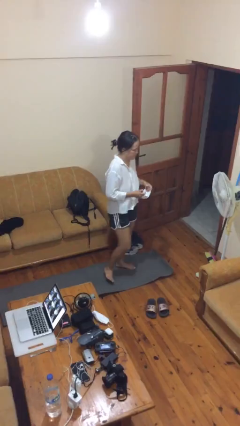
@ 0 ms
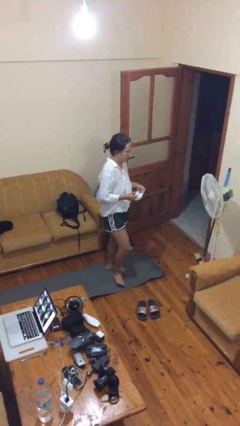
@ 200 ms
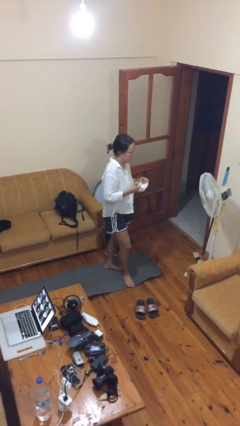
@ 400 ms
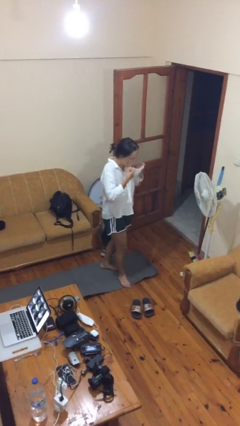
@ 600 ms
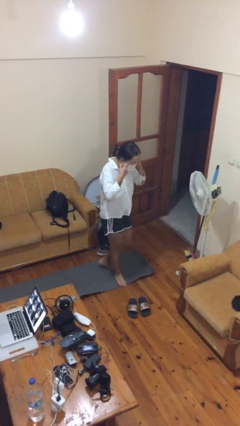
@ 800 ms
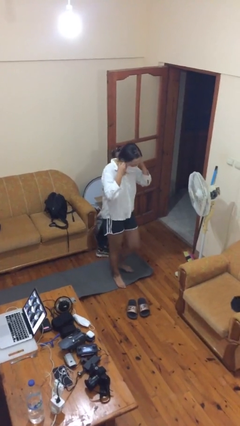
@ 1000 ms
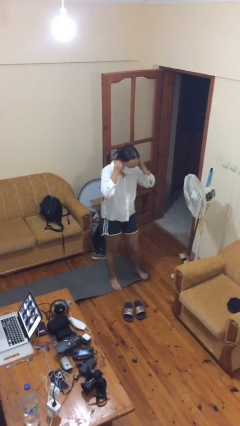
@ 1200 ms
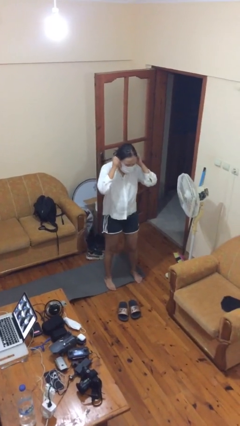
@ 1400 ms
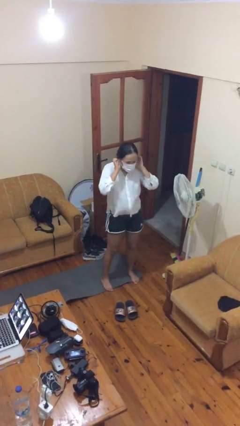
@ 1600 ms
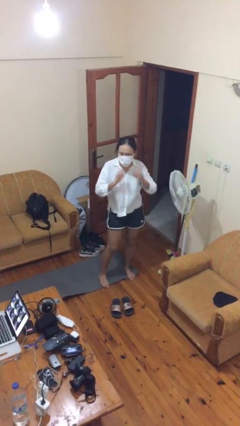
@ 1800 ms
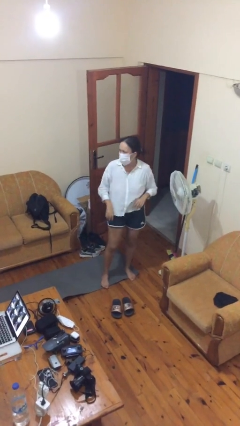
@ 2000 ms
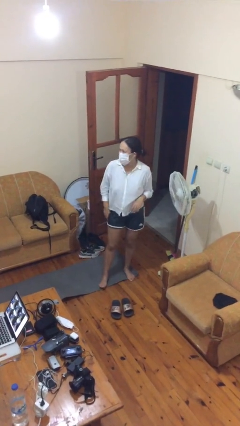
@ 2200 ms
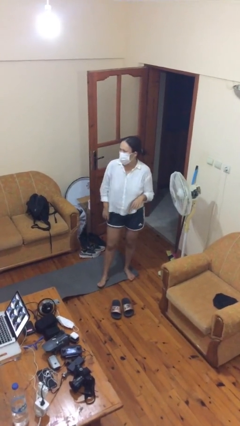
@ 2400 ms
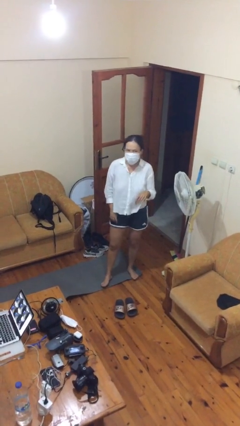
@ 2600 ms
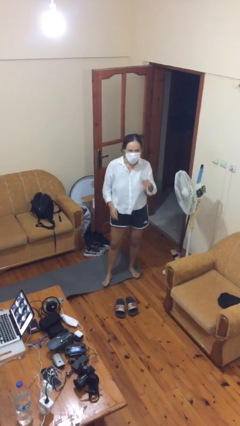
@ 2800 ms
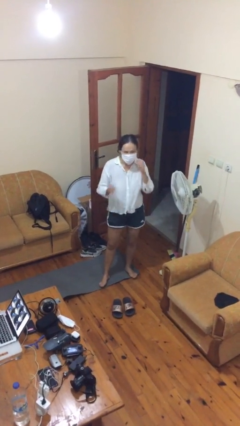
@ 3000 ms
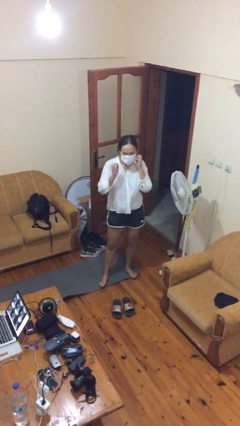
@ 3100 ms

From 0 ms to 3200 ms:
person puts on facemask

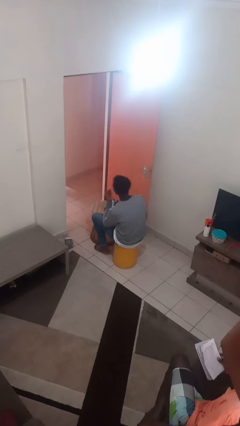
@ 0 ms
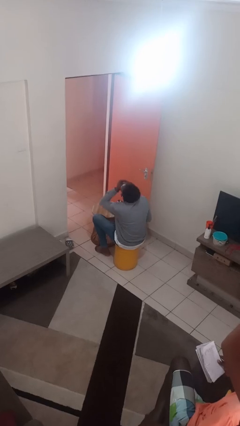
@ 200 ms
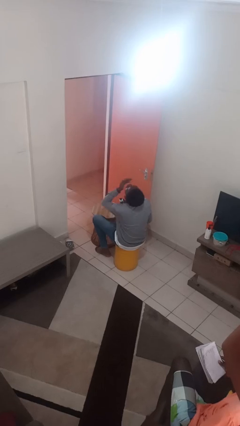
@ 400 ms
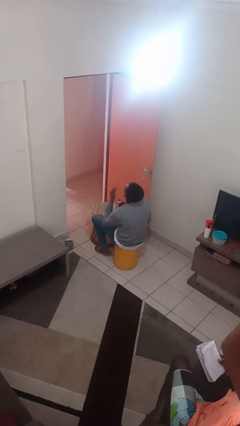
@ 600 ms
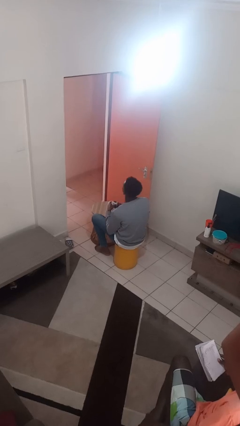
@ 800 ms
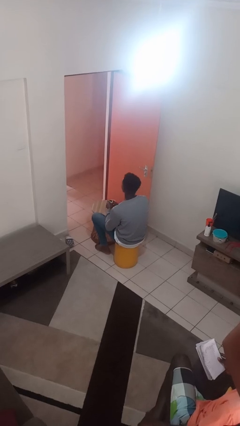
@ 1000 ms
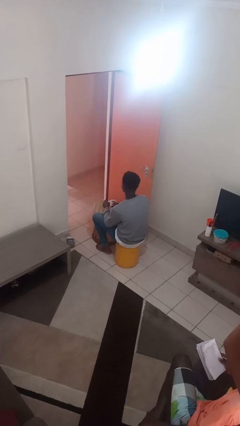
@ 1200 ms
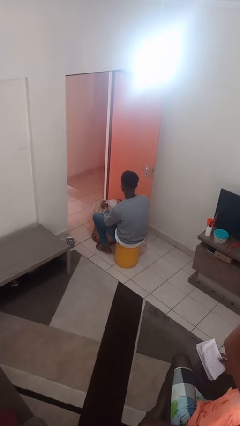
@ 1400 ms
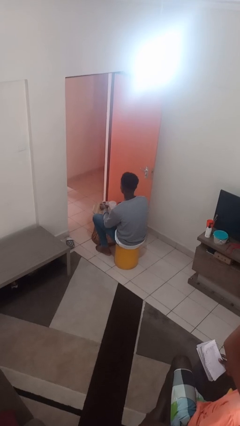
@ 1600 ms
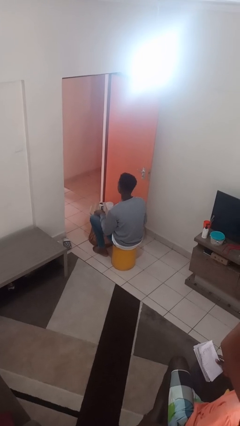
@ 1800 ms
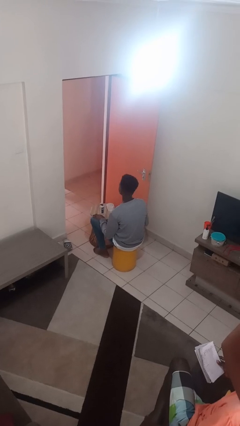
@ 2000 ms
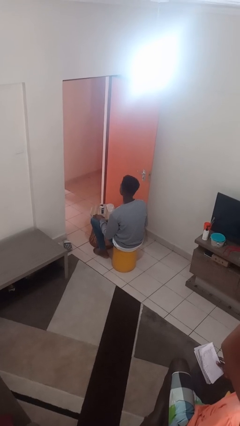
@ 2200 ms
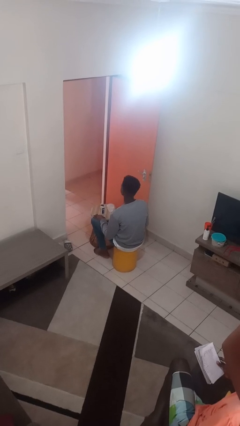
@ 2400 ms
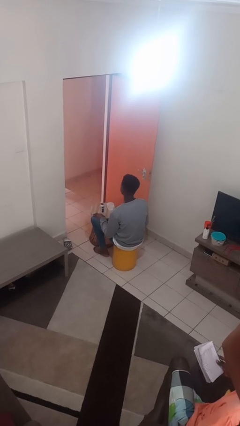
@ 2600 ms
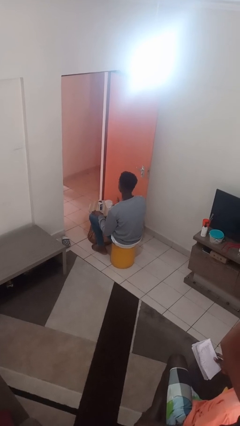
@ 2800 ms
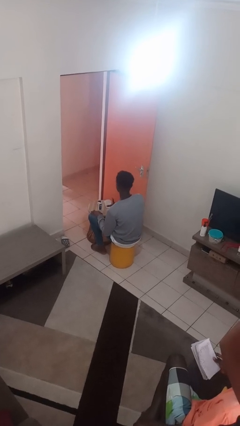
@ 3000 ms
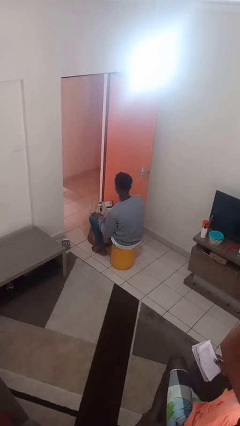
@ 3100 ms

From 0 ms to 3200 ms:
person takes medicine pills

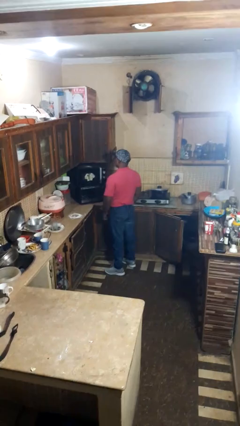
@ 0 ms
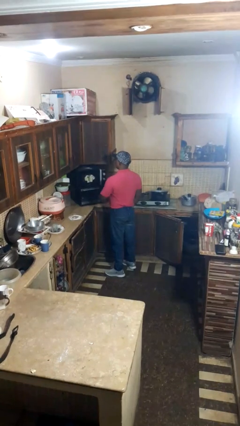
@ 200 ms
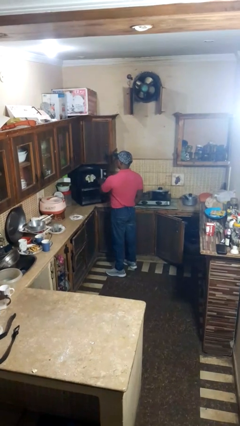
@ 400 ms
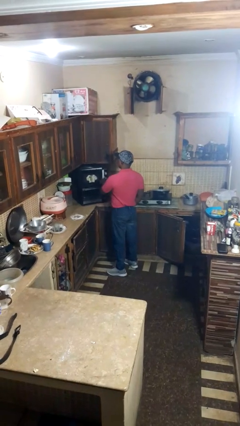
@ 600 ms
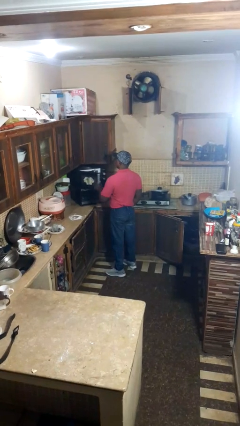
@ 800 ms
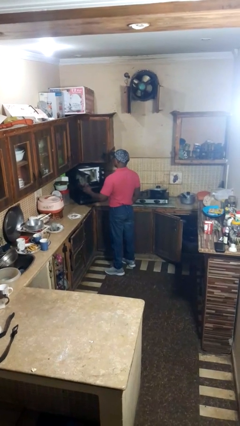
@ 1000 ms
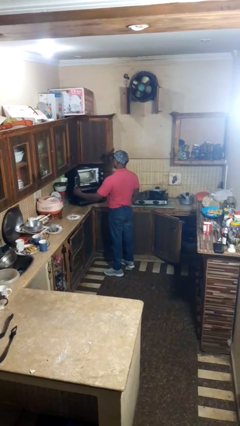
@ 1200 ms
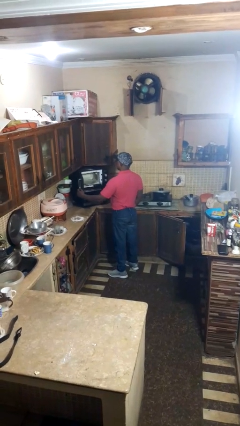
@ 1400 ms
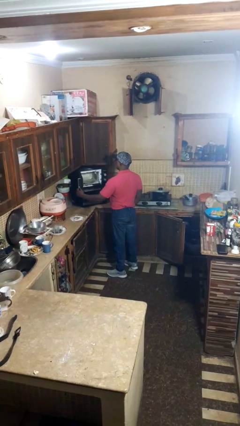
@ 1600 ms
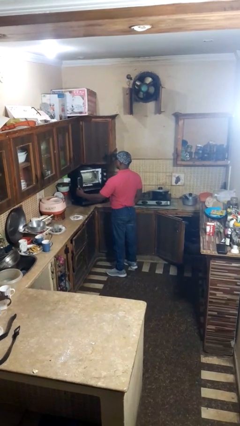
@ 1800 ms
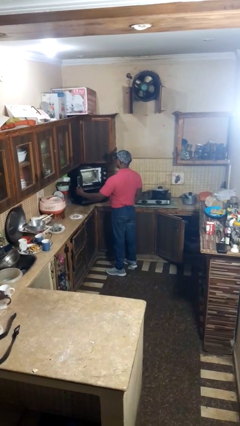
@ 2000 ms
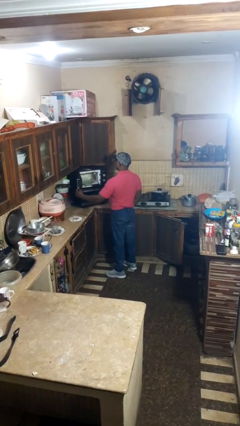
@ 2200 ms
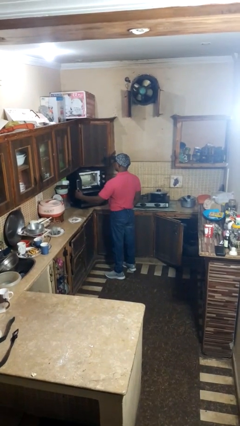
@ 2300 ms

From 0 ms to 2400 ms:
person opens microwave

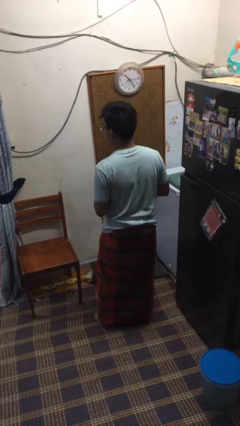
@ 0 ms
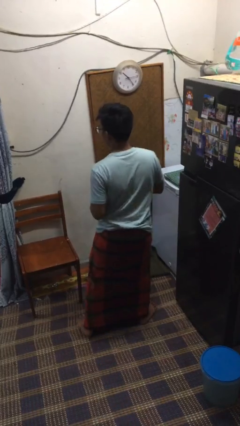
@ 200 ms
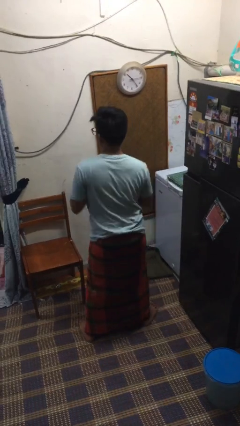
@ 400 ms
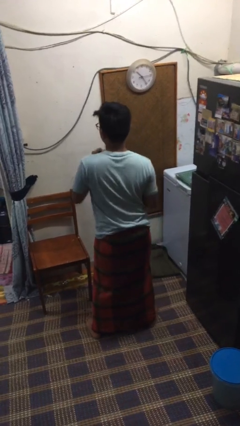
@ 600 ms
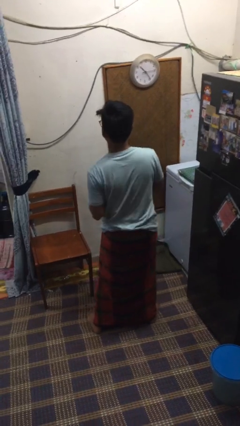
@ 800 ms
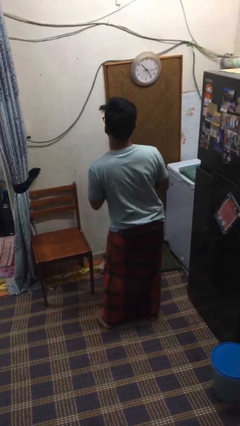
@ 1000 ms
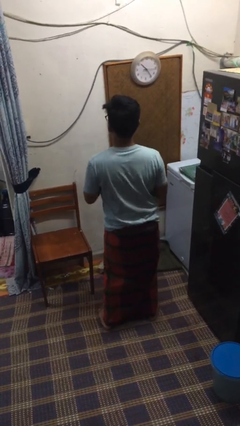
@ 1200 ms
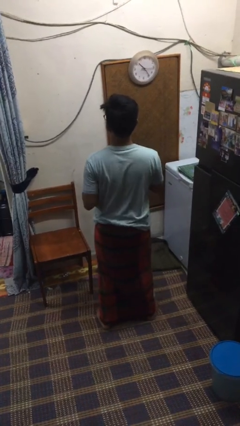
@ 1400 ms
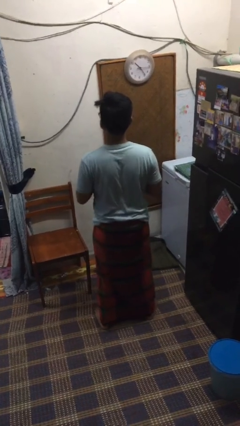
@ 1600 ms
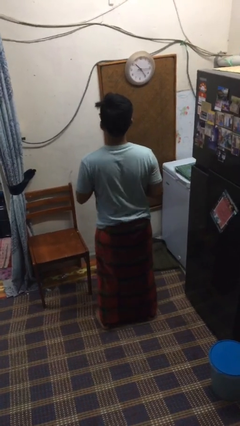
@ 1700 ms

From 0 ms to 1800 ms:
person wiggles hips

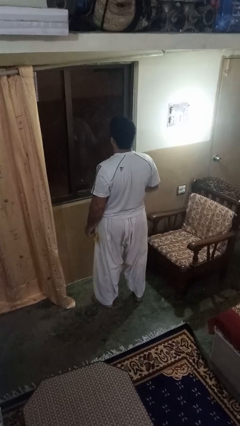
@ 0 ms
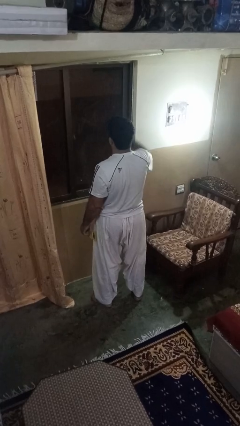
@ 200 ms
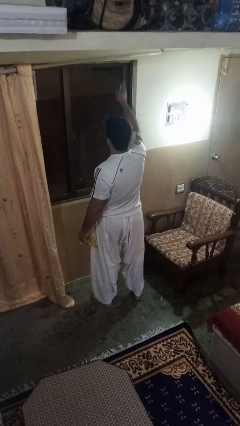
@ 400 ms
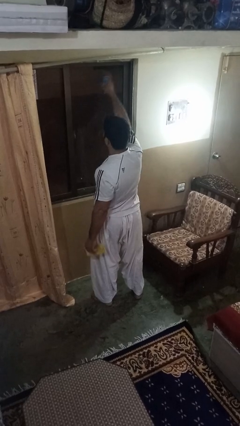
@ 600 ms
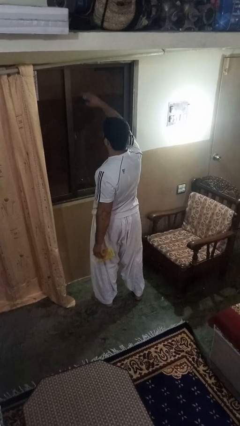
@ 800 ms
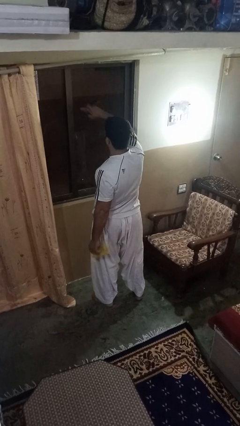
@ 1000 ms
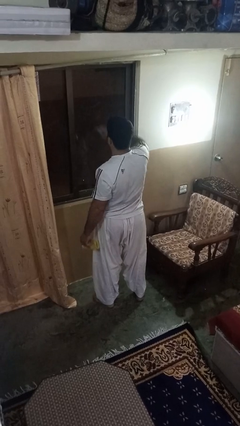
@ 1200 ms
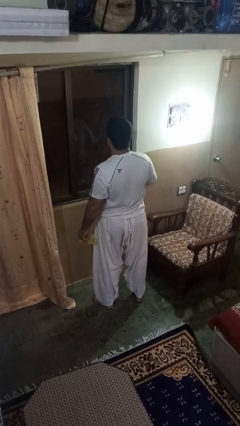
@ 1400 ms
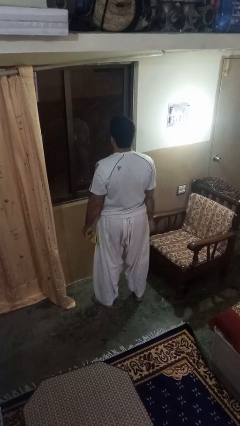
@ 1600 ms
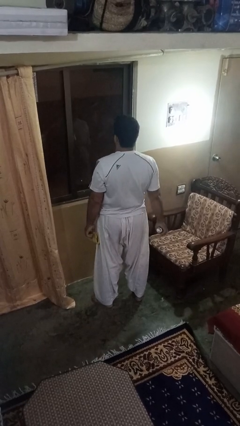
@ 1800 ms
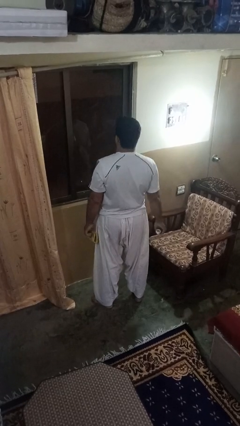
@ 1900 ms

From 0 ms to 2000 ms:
person sprays from bottle

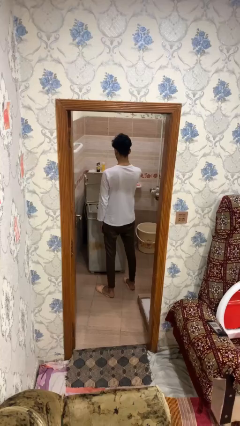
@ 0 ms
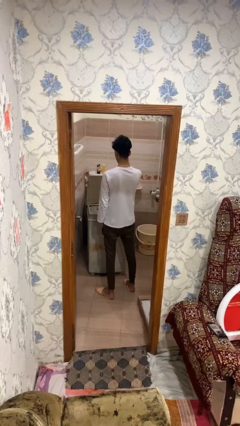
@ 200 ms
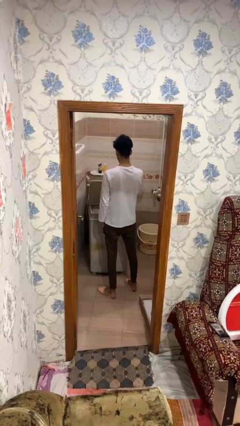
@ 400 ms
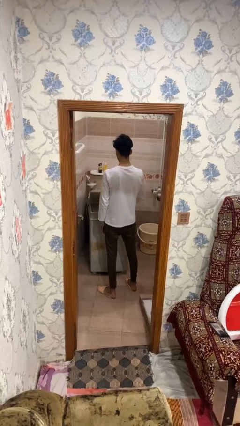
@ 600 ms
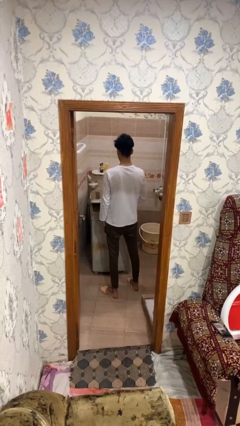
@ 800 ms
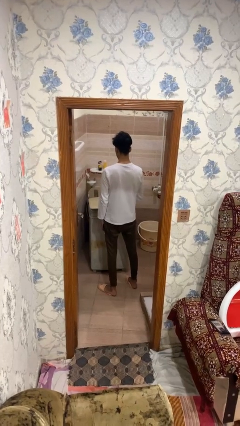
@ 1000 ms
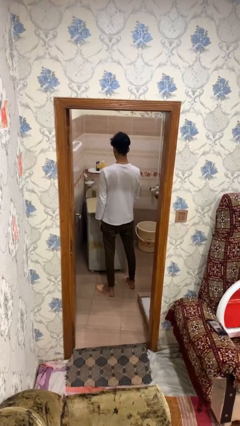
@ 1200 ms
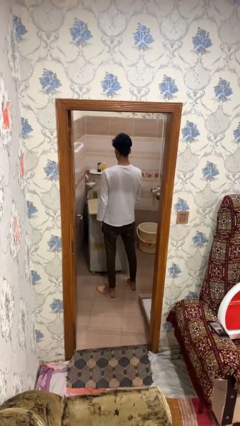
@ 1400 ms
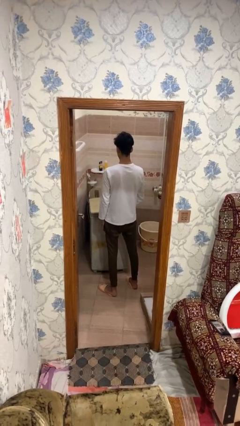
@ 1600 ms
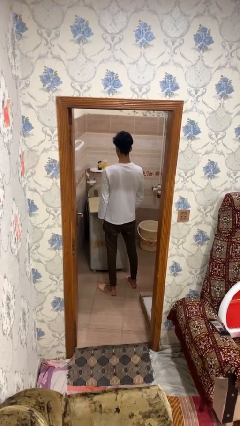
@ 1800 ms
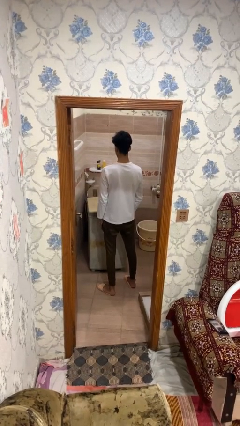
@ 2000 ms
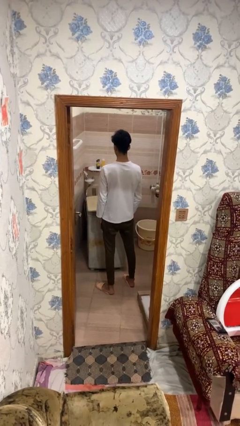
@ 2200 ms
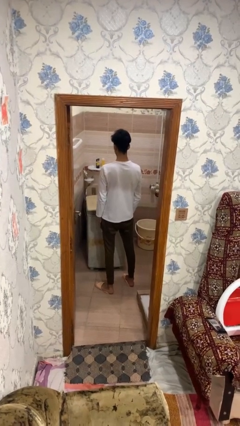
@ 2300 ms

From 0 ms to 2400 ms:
person closes clothes washer

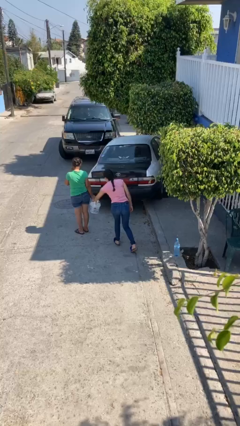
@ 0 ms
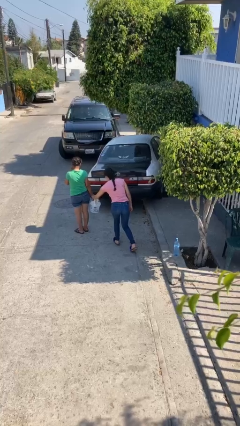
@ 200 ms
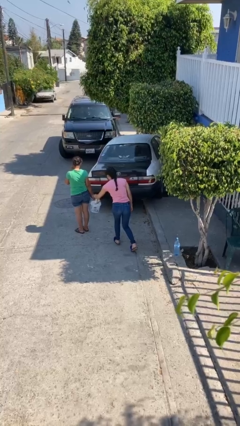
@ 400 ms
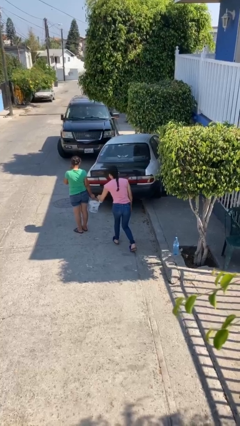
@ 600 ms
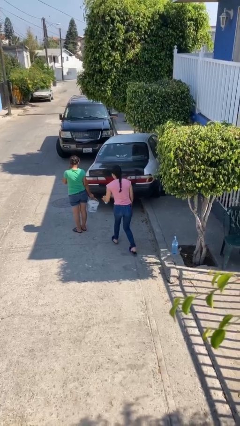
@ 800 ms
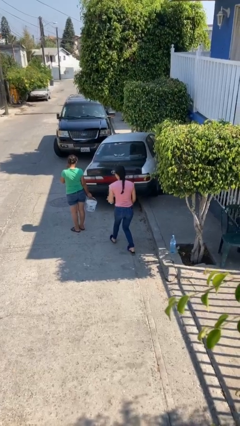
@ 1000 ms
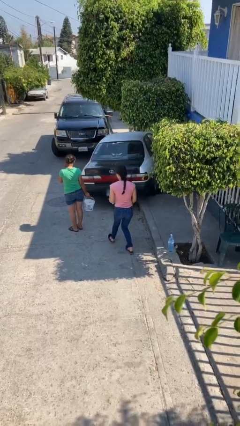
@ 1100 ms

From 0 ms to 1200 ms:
person steals object from person

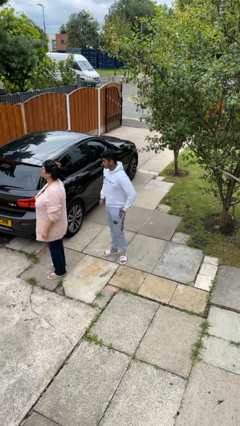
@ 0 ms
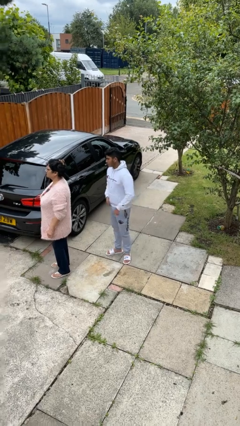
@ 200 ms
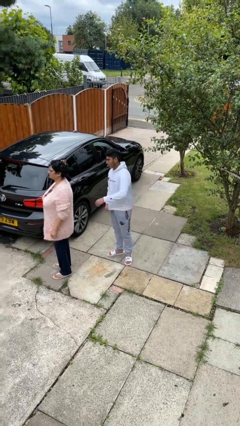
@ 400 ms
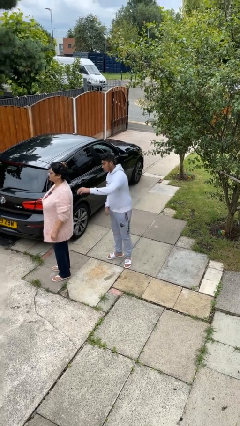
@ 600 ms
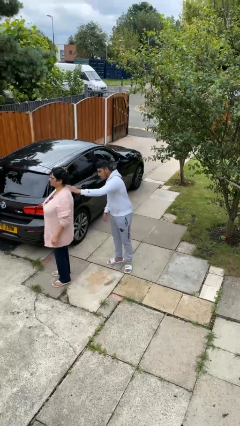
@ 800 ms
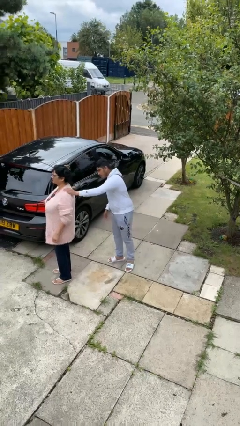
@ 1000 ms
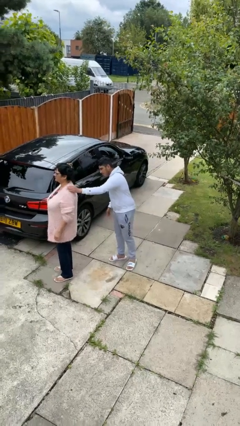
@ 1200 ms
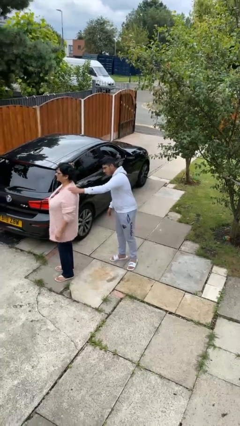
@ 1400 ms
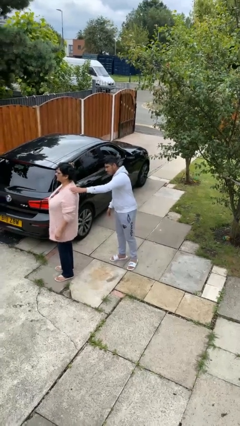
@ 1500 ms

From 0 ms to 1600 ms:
person touches back of person
